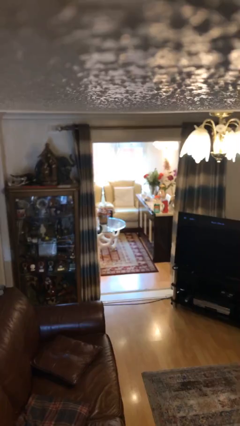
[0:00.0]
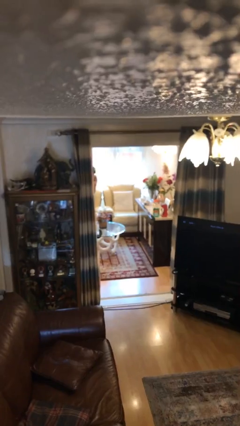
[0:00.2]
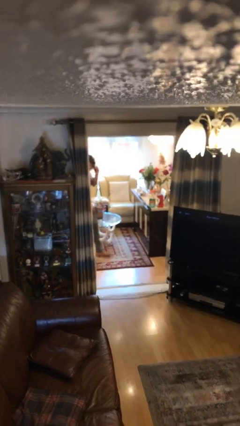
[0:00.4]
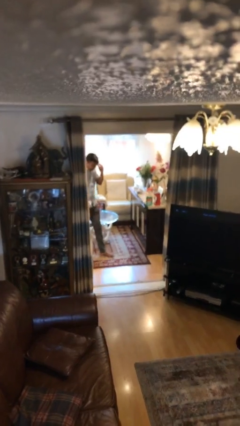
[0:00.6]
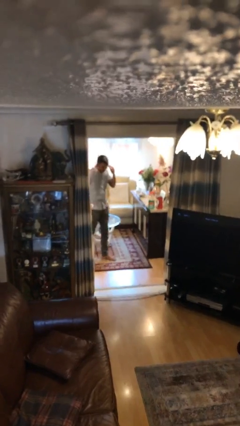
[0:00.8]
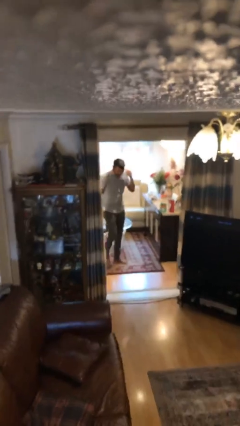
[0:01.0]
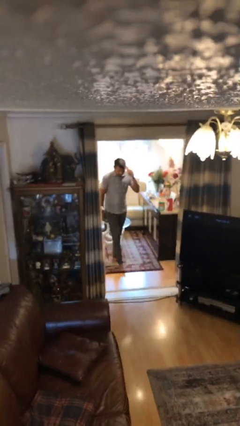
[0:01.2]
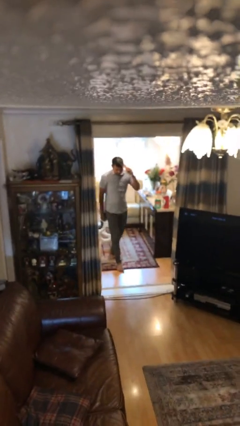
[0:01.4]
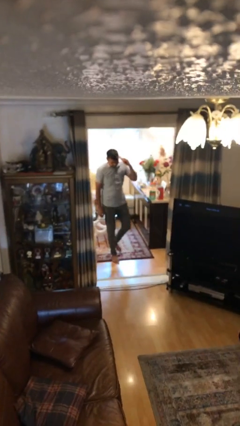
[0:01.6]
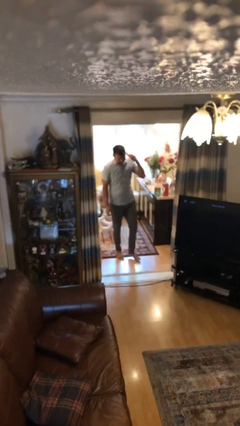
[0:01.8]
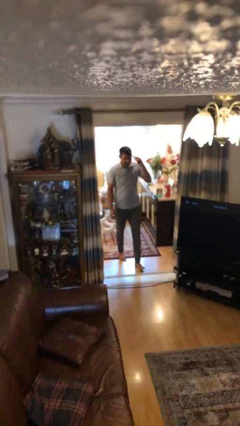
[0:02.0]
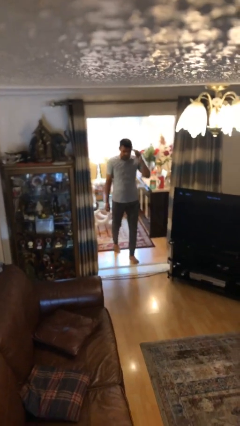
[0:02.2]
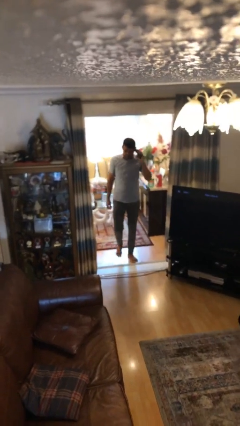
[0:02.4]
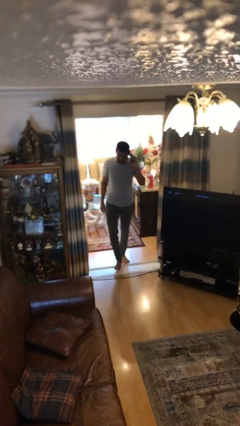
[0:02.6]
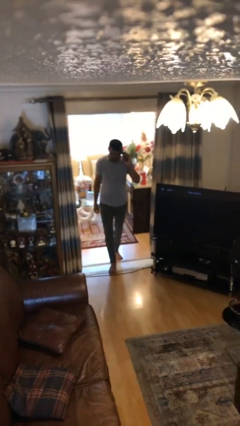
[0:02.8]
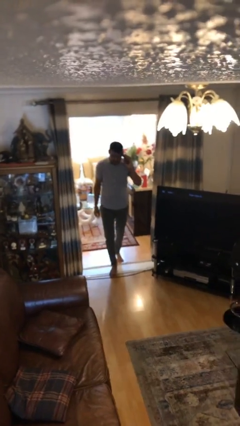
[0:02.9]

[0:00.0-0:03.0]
person enters scene through structure

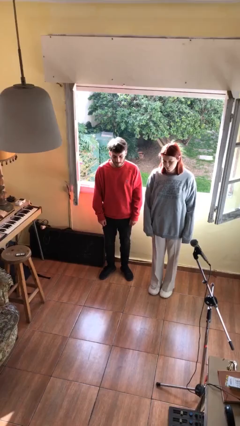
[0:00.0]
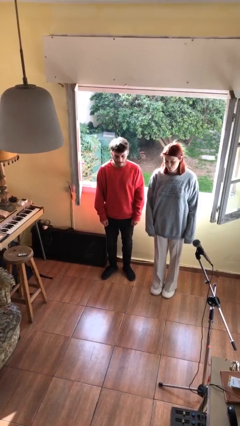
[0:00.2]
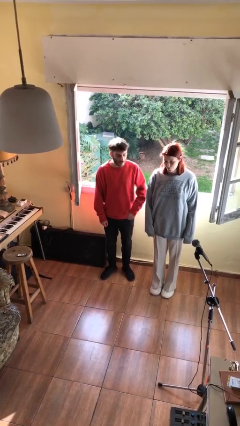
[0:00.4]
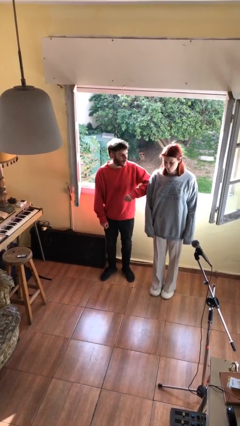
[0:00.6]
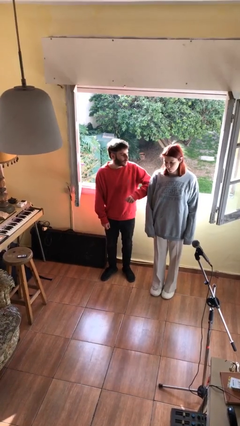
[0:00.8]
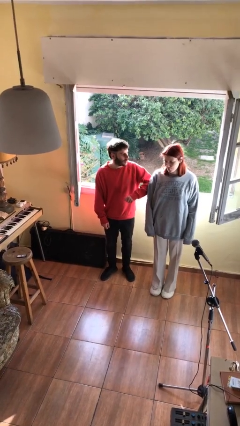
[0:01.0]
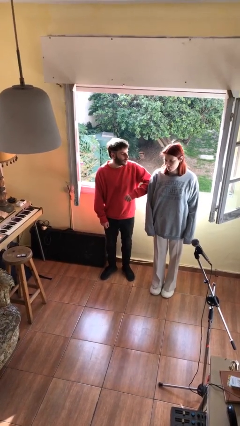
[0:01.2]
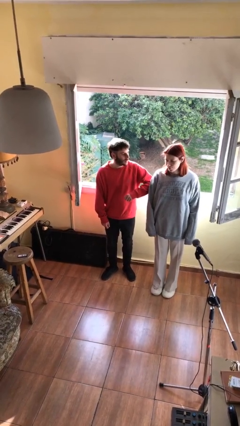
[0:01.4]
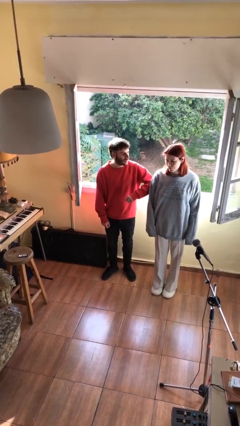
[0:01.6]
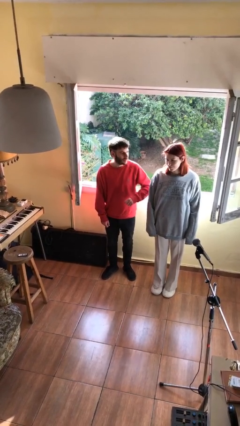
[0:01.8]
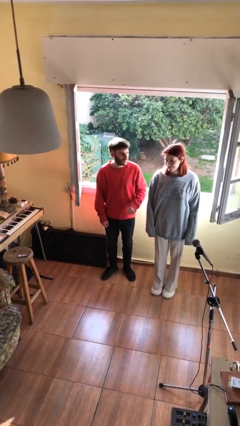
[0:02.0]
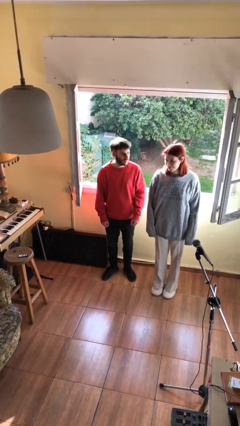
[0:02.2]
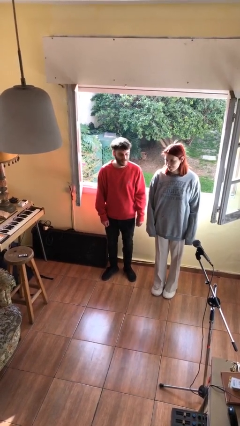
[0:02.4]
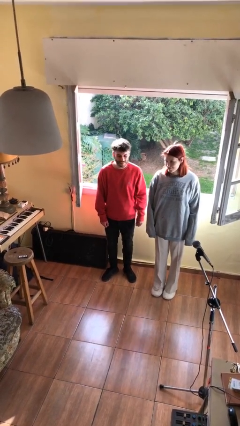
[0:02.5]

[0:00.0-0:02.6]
person nudges person with elbow

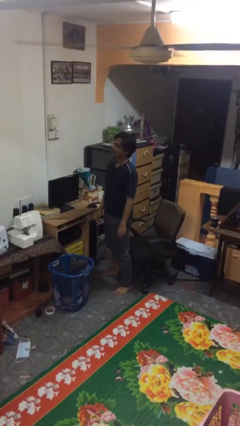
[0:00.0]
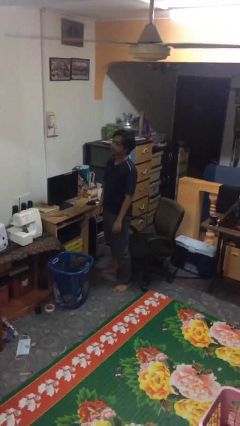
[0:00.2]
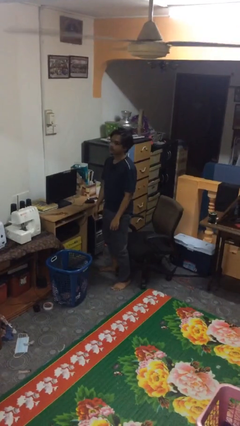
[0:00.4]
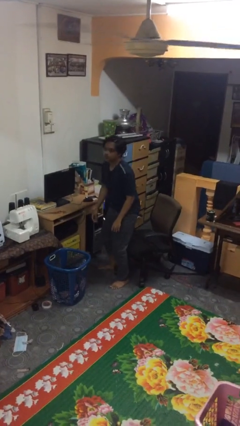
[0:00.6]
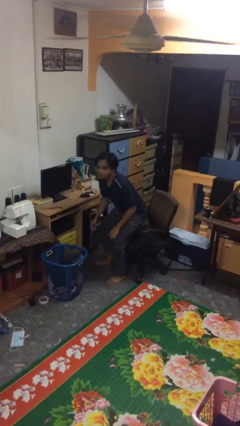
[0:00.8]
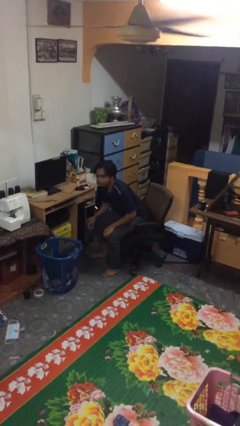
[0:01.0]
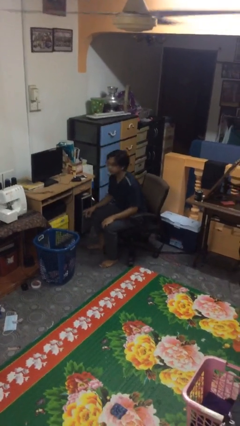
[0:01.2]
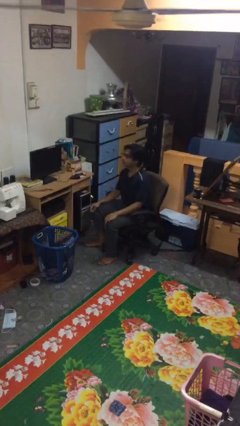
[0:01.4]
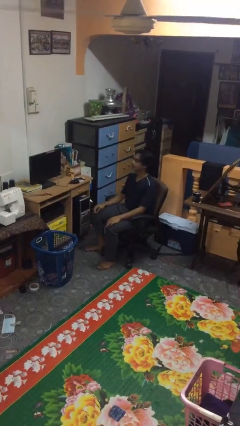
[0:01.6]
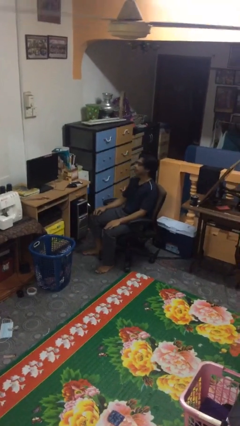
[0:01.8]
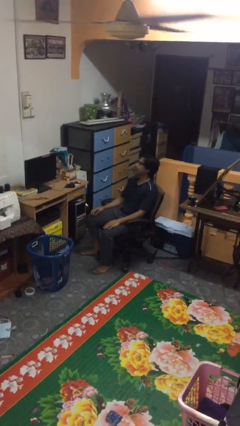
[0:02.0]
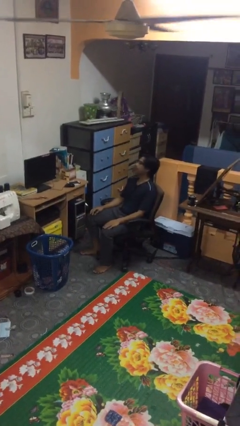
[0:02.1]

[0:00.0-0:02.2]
person sits down

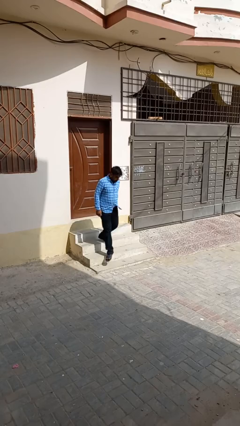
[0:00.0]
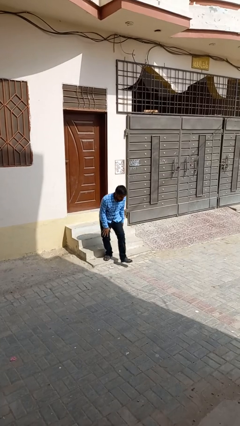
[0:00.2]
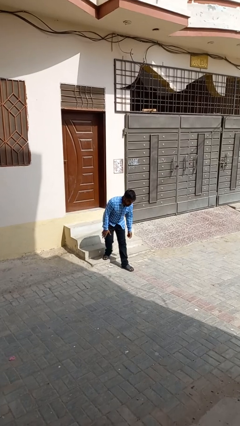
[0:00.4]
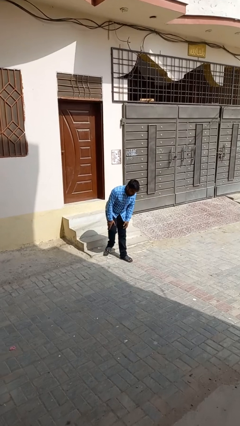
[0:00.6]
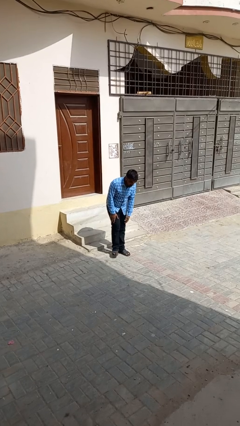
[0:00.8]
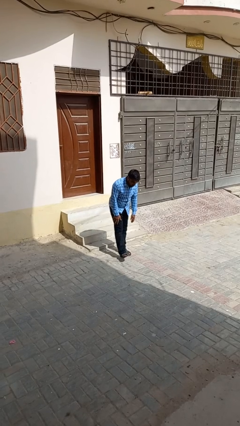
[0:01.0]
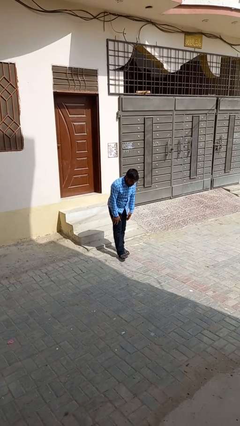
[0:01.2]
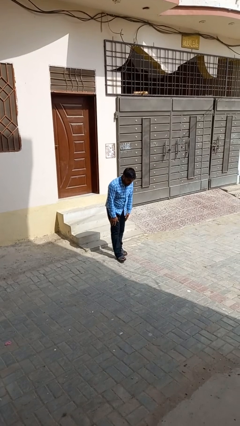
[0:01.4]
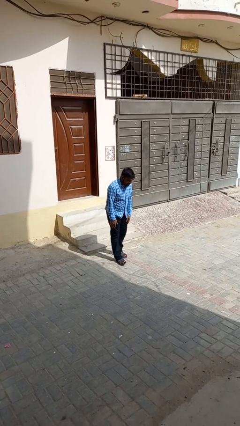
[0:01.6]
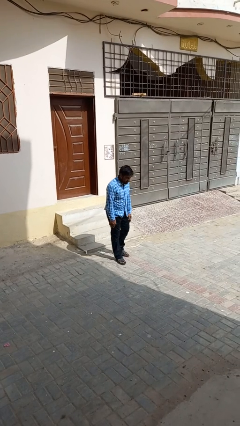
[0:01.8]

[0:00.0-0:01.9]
person trips on stair

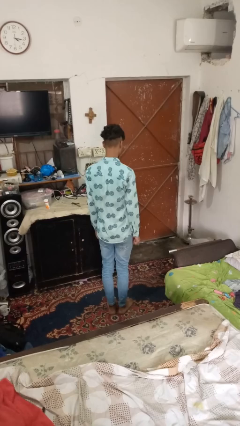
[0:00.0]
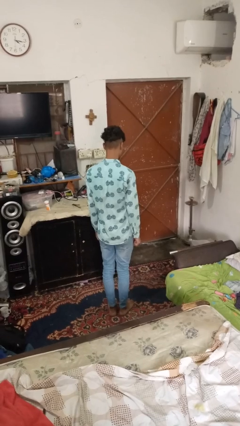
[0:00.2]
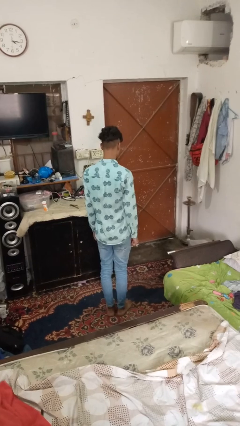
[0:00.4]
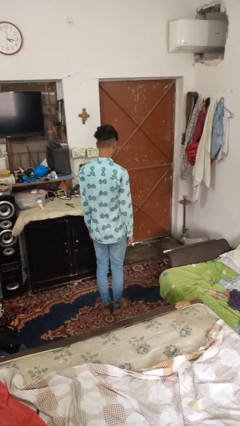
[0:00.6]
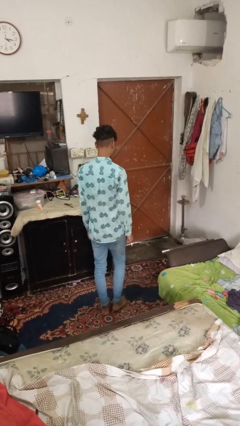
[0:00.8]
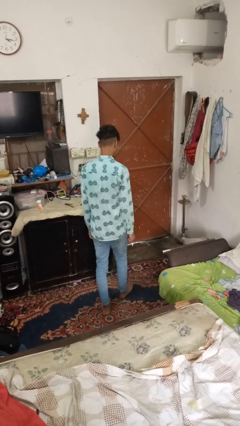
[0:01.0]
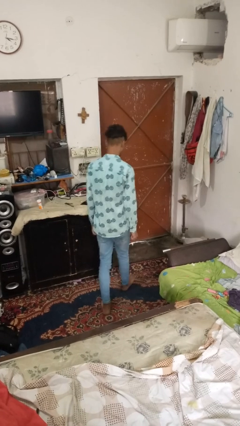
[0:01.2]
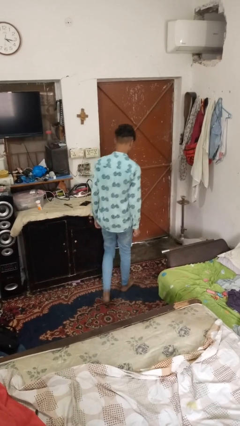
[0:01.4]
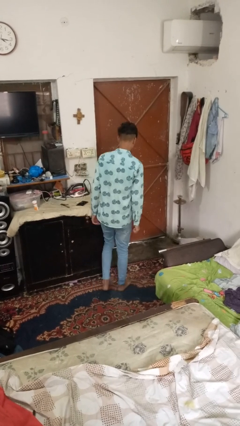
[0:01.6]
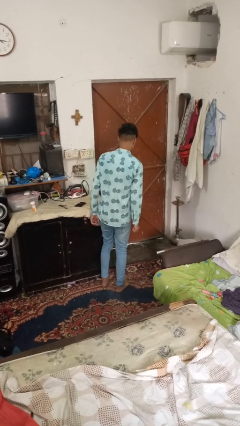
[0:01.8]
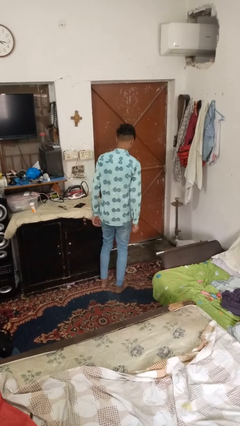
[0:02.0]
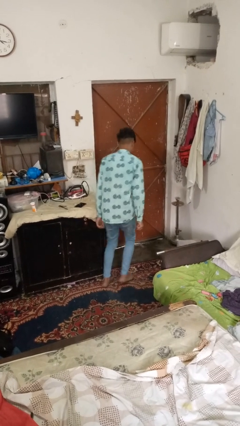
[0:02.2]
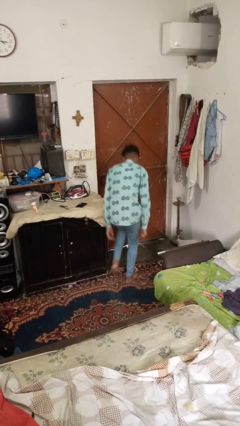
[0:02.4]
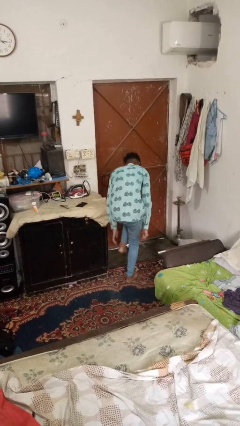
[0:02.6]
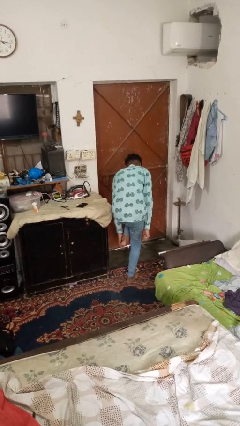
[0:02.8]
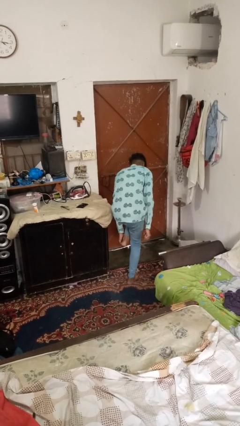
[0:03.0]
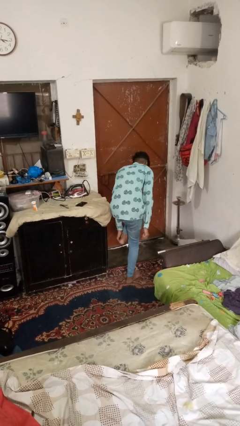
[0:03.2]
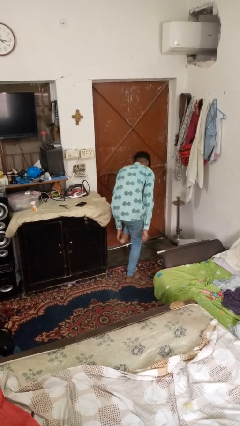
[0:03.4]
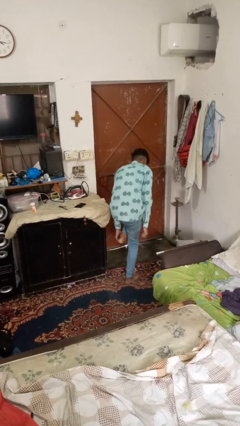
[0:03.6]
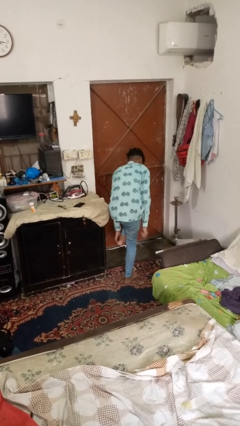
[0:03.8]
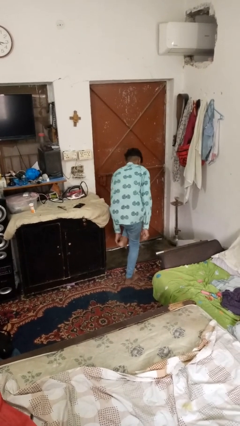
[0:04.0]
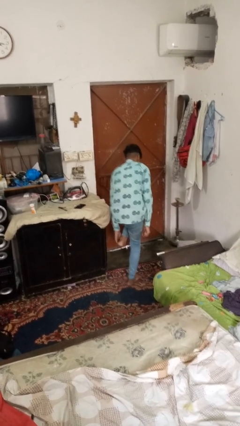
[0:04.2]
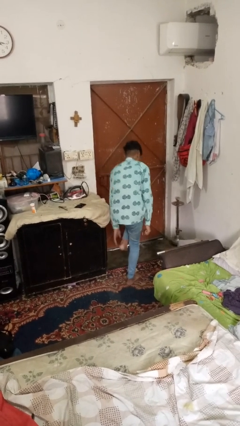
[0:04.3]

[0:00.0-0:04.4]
person stubs toe

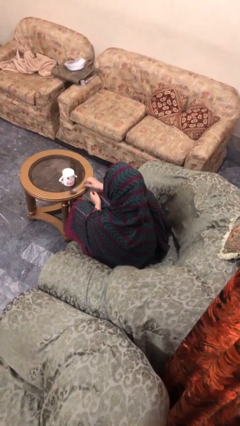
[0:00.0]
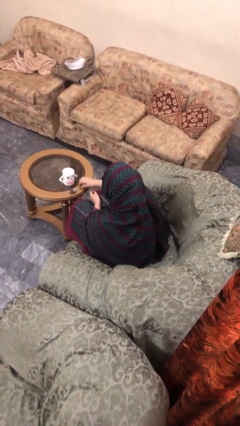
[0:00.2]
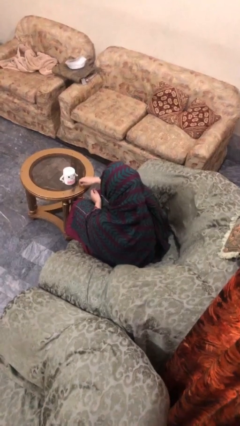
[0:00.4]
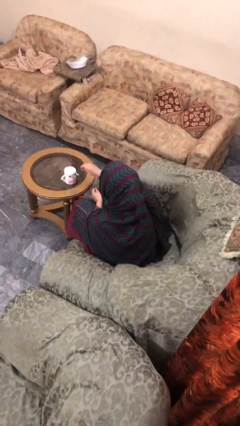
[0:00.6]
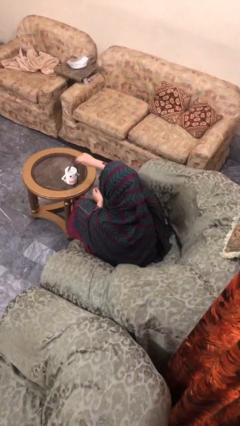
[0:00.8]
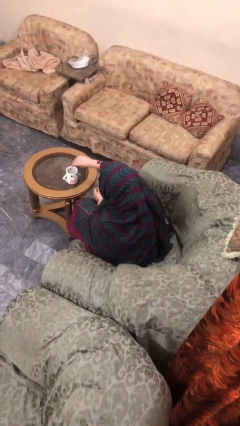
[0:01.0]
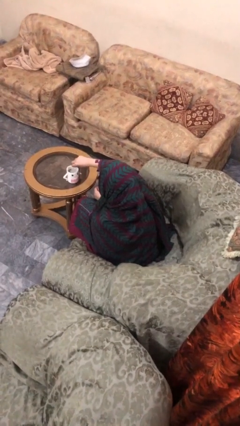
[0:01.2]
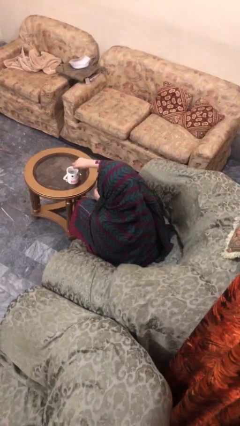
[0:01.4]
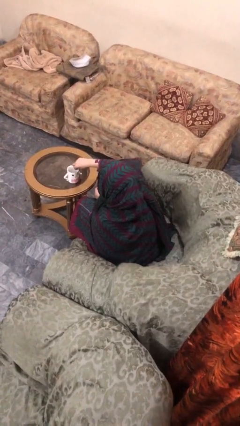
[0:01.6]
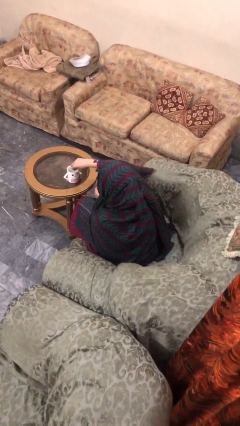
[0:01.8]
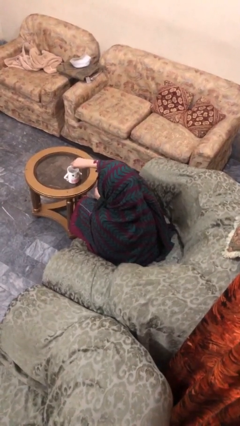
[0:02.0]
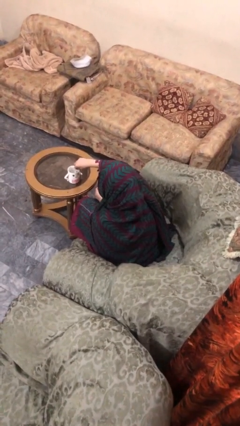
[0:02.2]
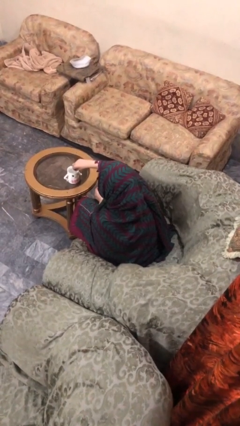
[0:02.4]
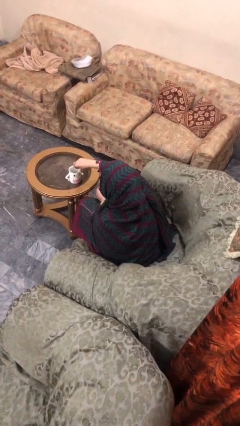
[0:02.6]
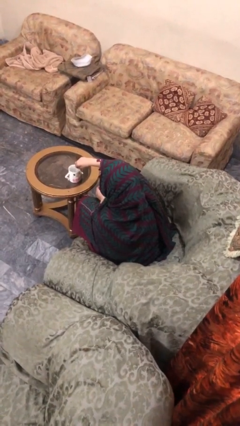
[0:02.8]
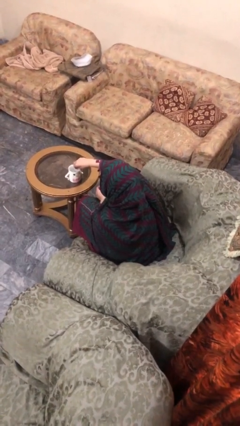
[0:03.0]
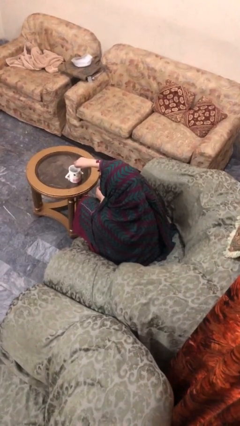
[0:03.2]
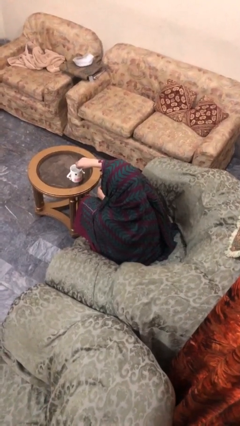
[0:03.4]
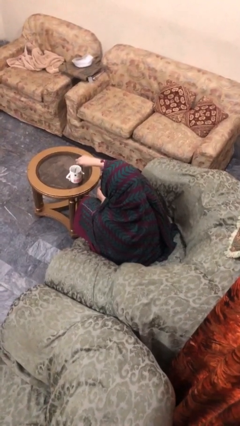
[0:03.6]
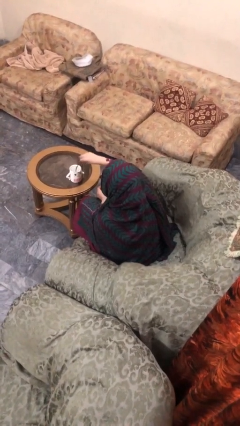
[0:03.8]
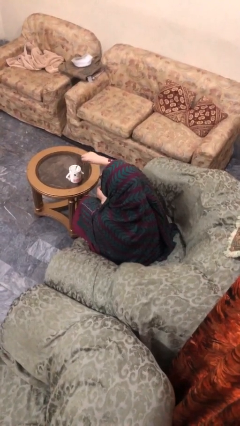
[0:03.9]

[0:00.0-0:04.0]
person stirs mug
